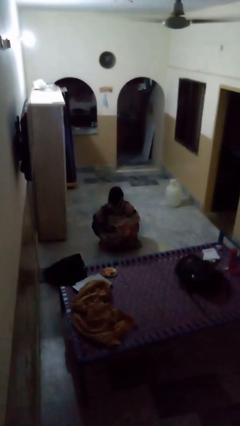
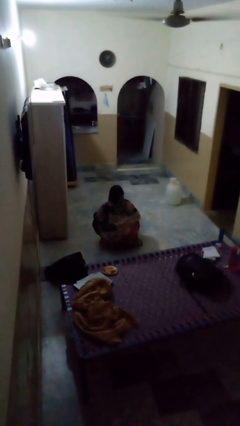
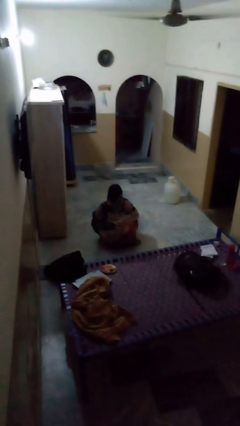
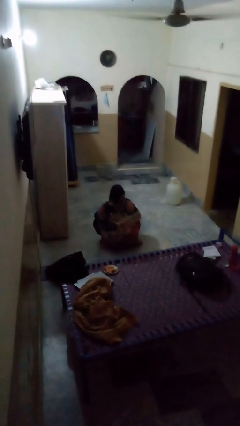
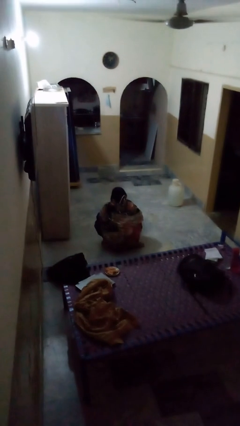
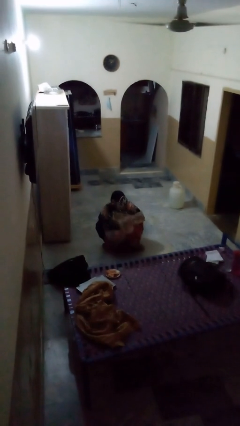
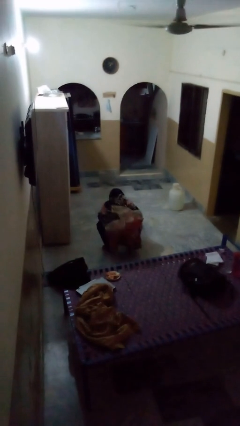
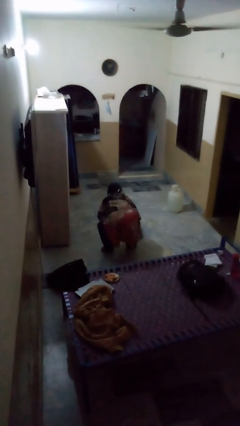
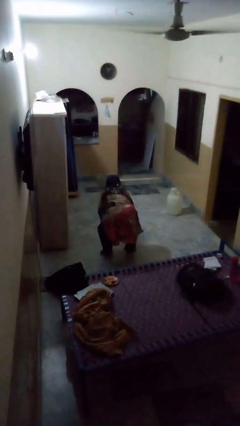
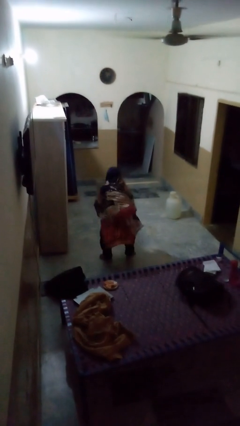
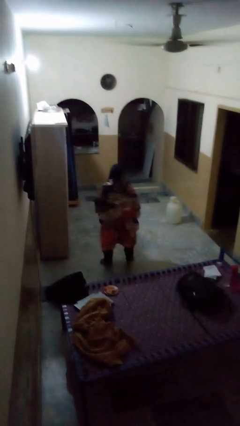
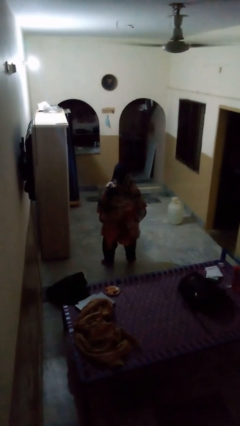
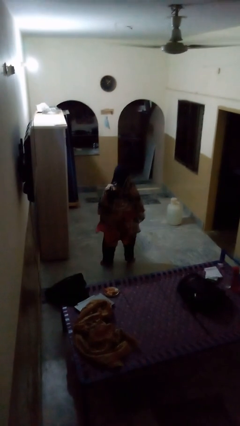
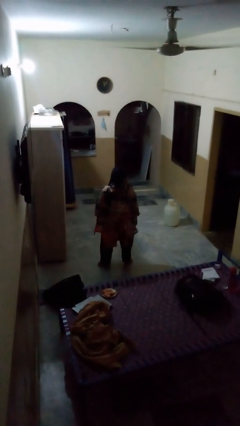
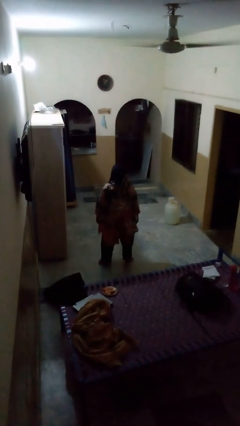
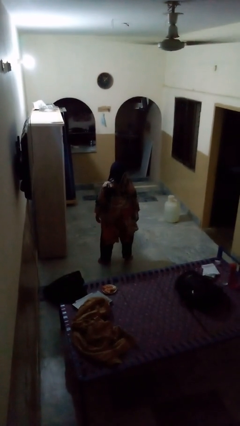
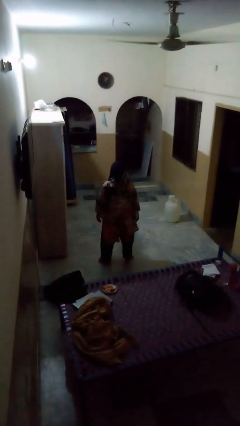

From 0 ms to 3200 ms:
person stands up

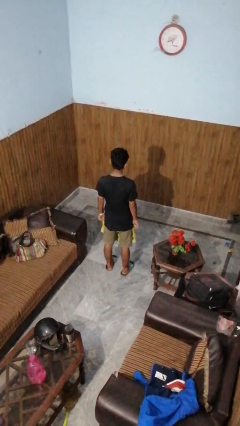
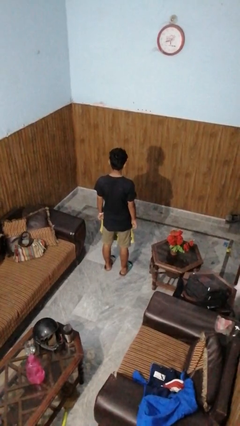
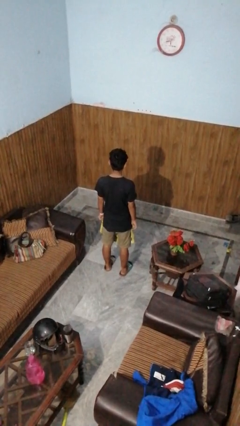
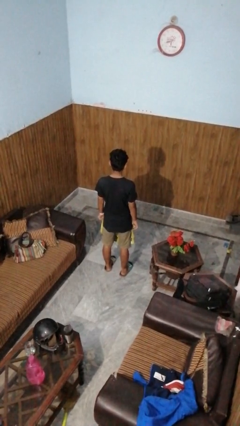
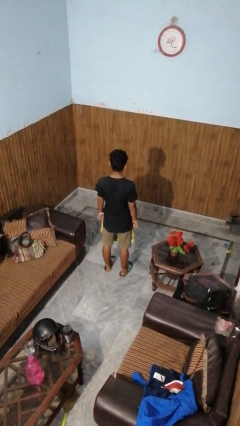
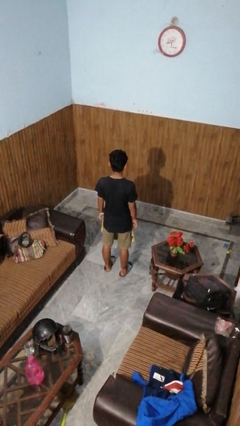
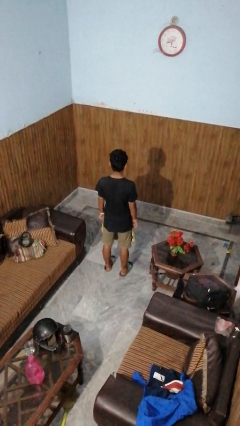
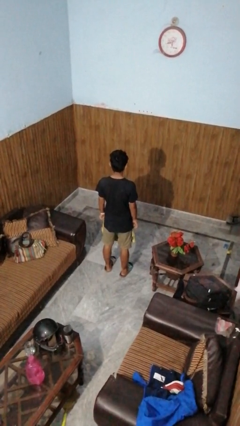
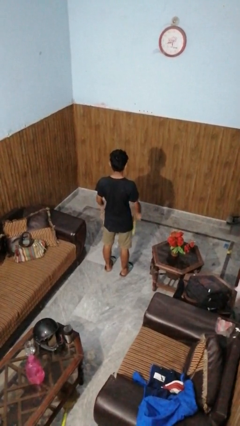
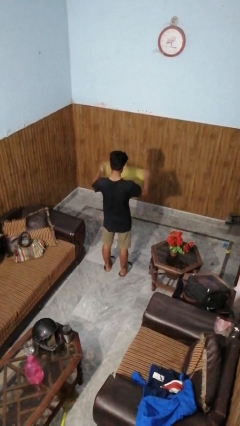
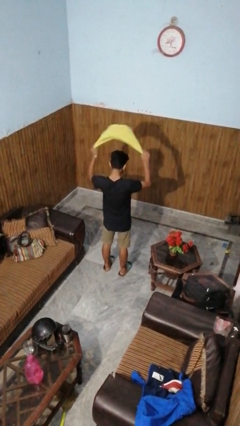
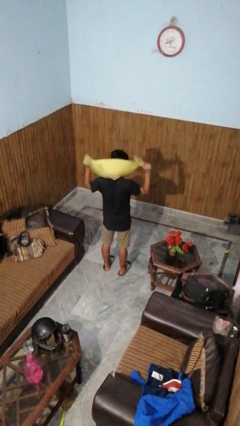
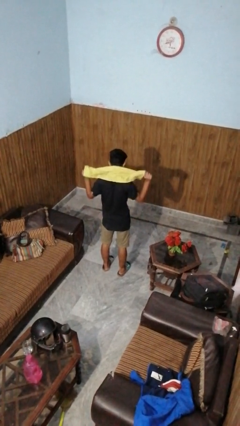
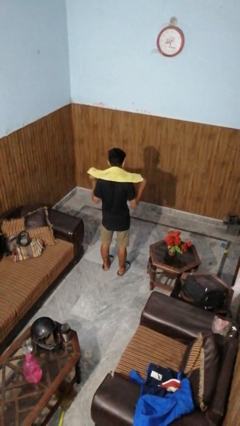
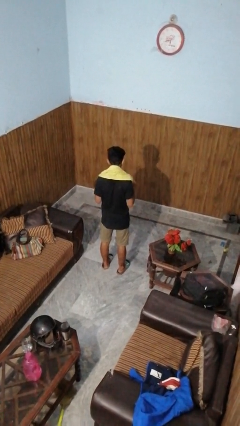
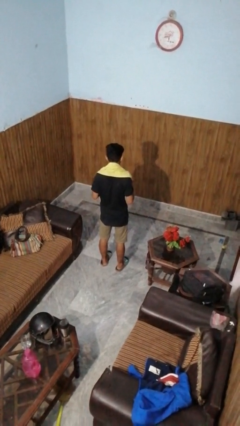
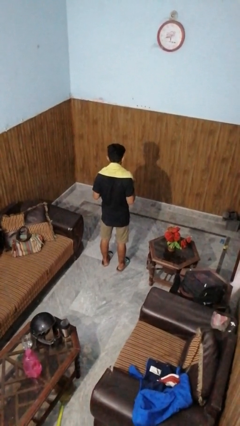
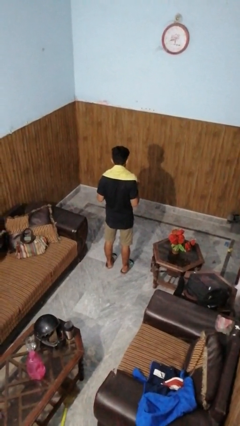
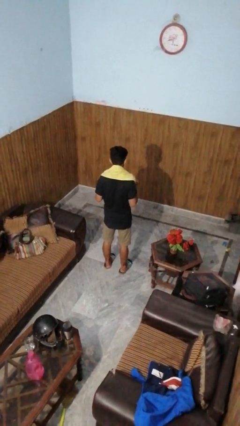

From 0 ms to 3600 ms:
person puts on scarf

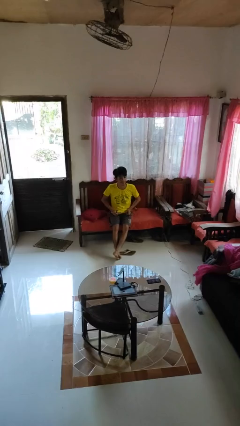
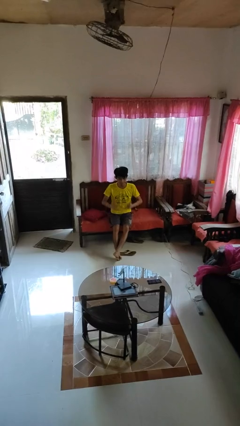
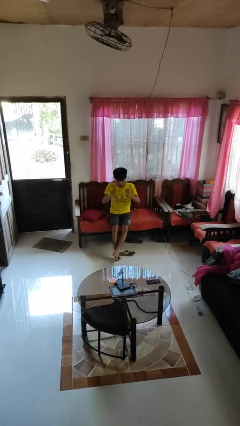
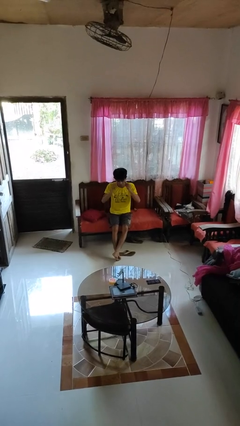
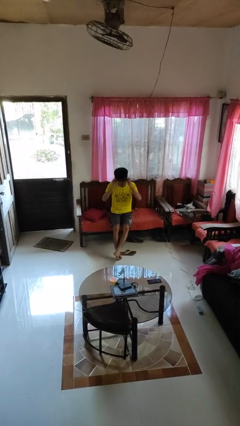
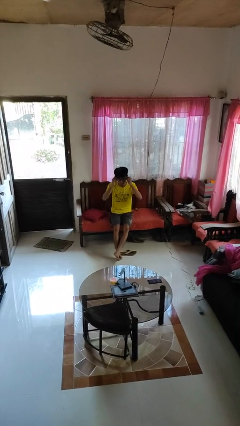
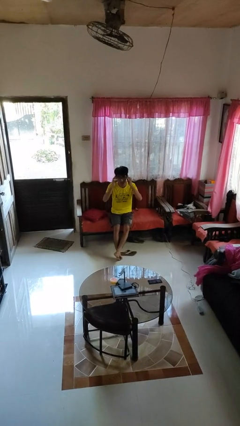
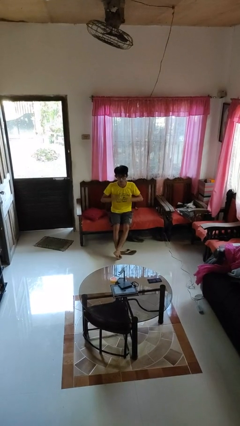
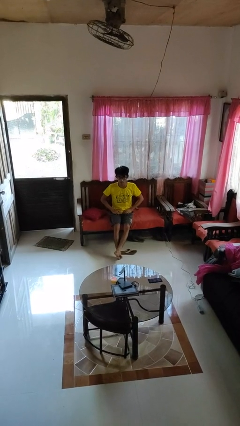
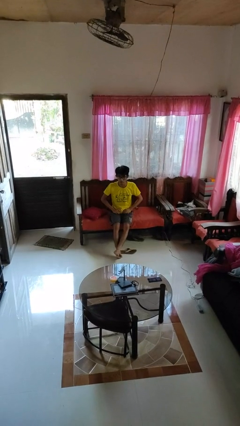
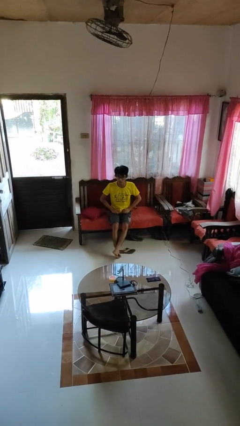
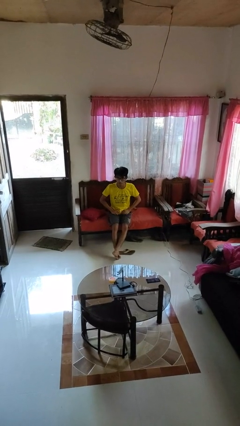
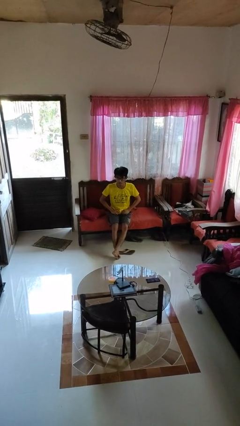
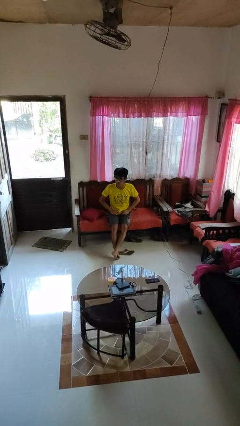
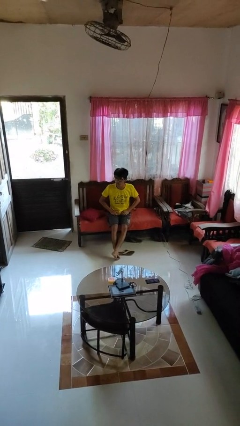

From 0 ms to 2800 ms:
person puts on glasses

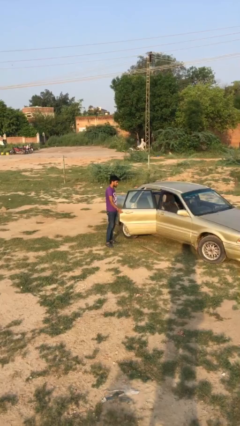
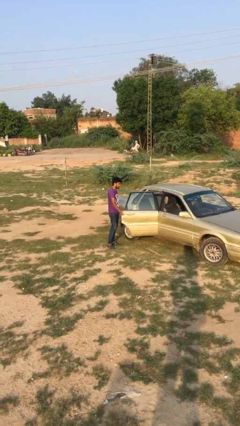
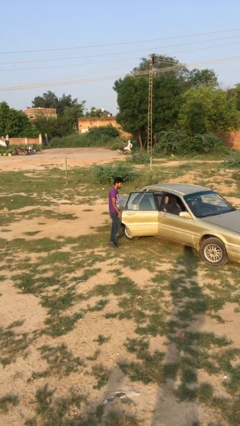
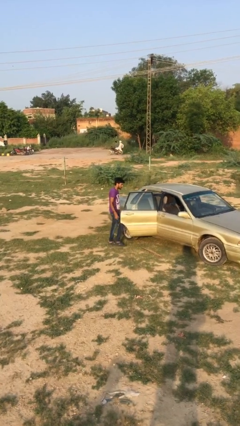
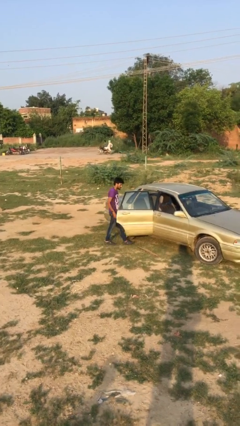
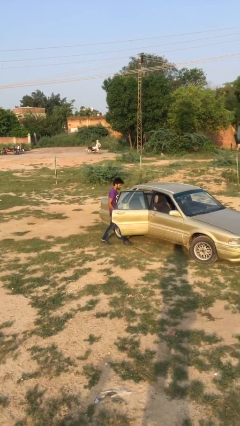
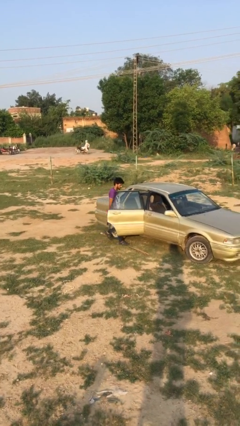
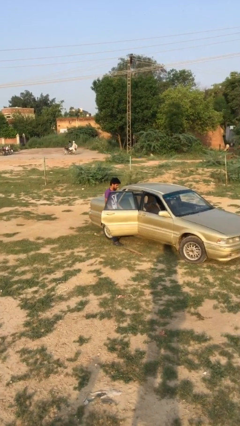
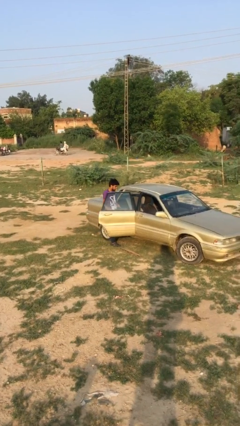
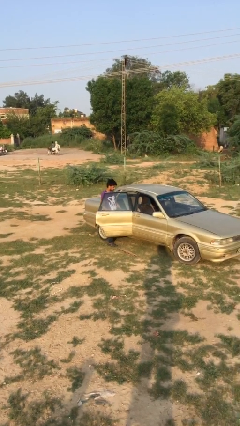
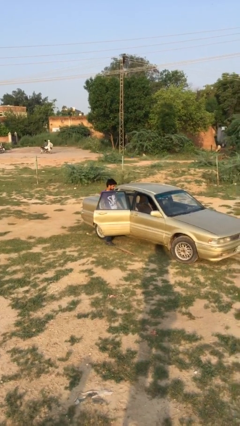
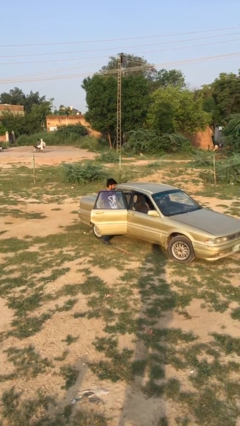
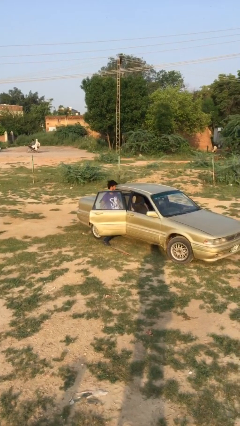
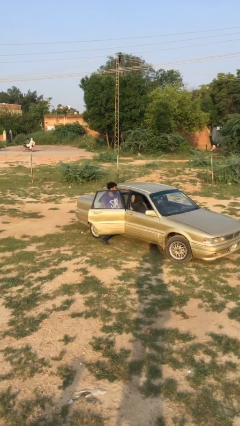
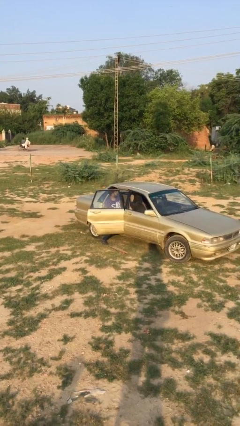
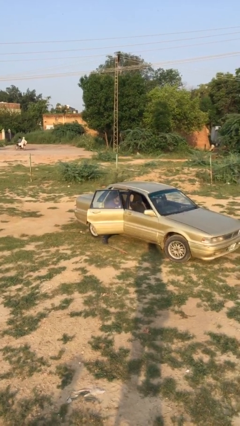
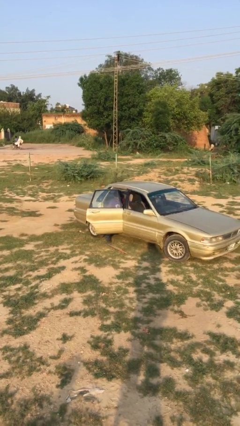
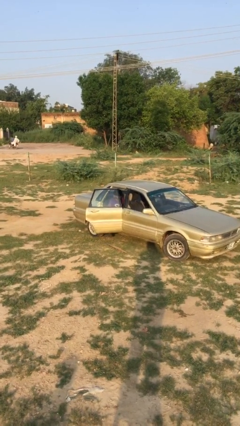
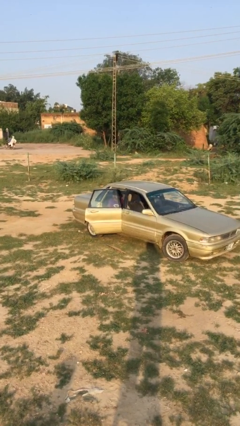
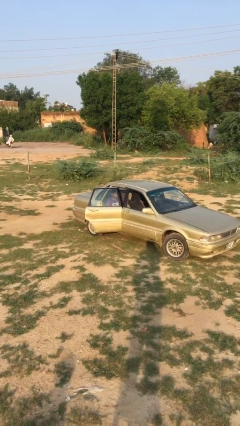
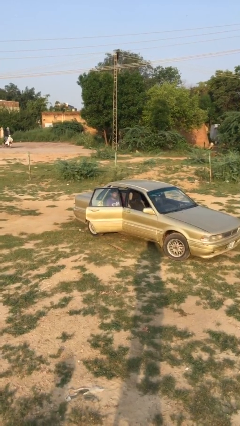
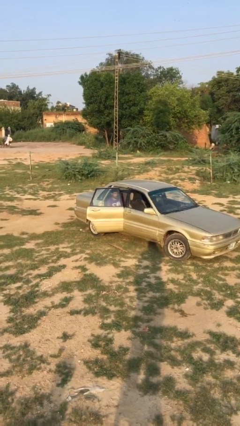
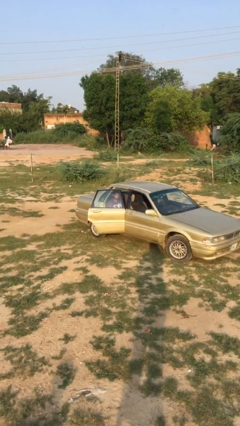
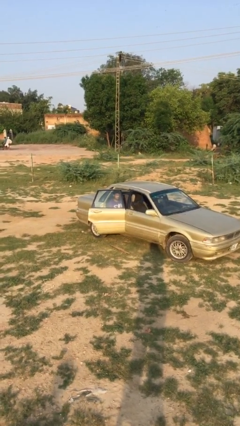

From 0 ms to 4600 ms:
person enters car

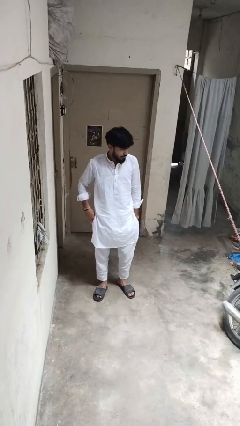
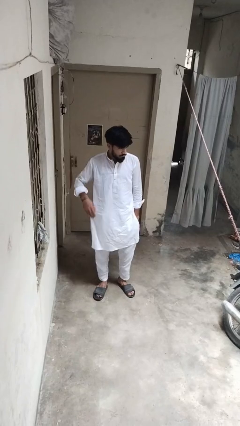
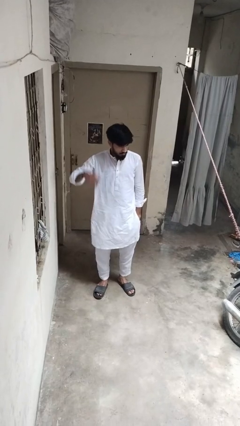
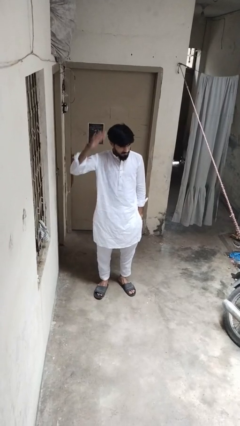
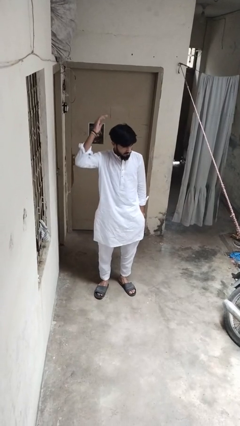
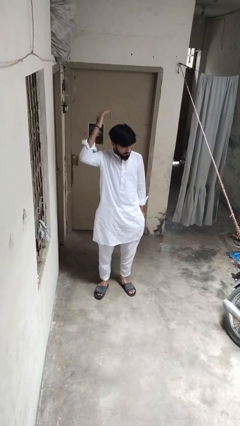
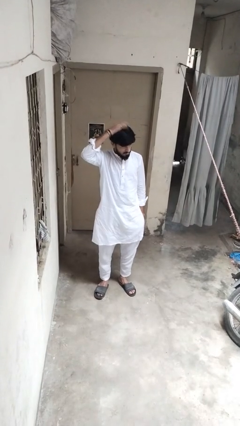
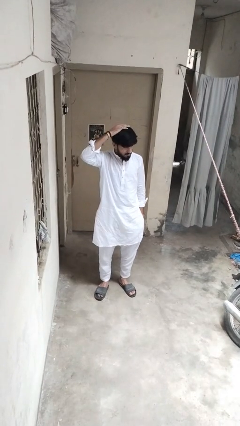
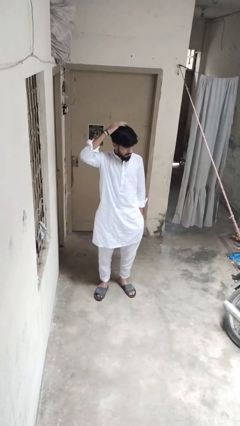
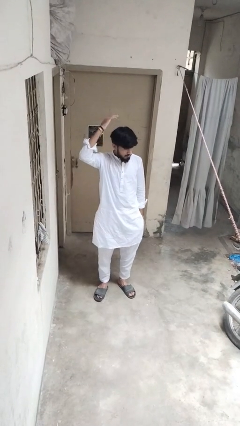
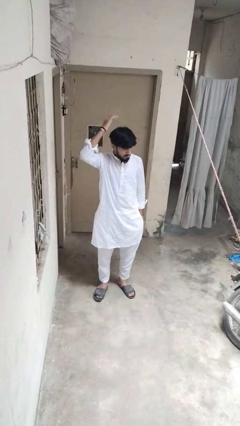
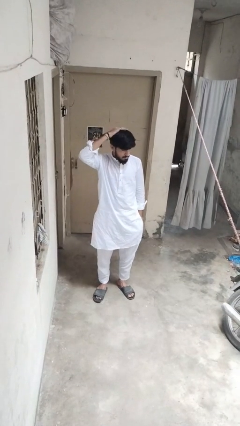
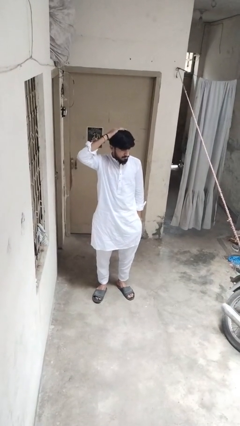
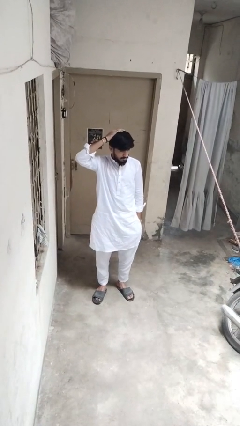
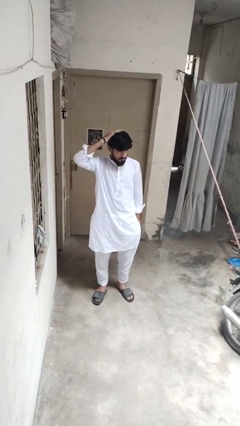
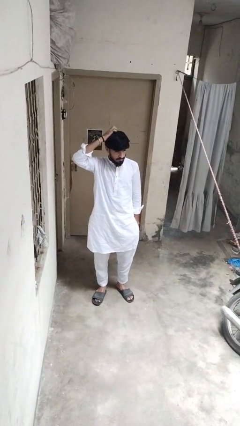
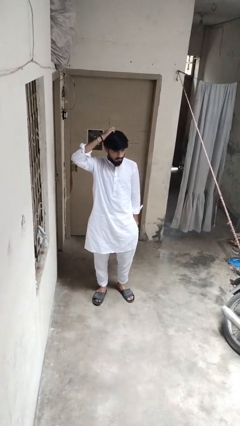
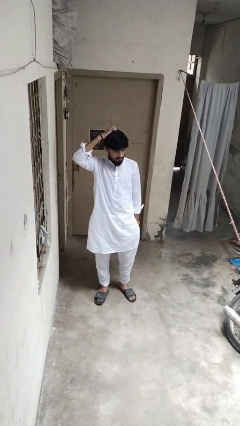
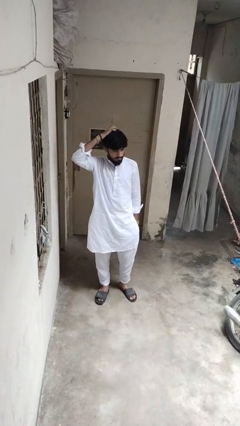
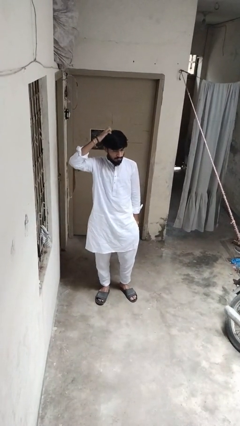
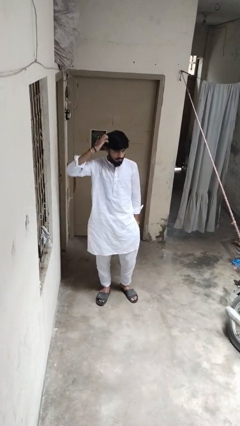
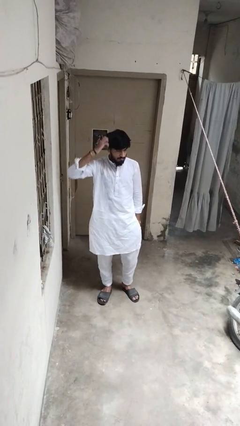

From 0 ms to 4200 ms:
person pats head
